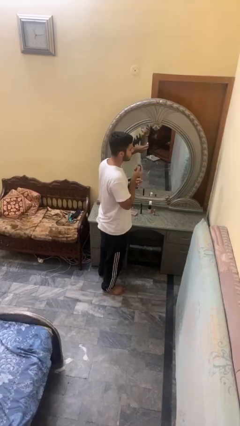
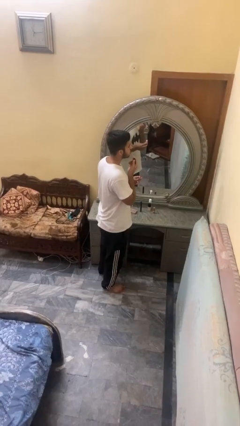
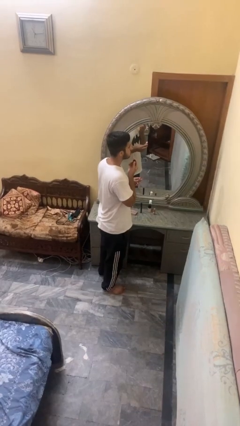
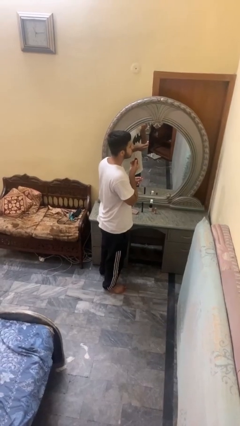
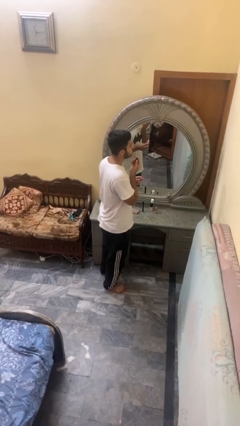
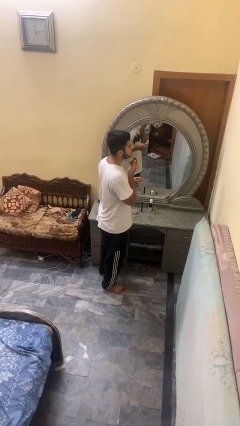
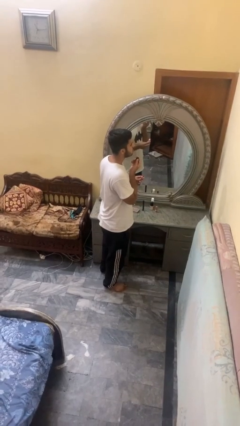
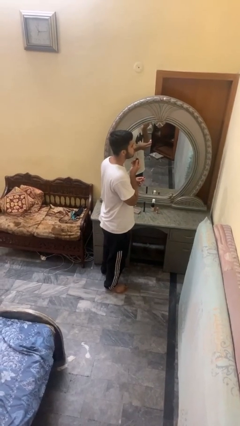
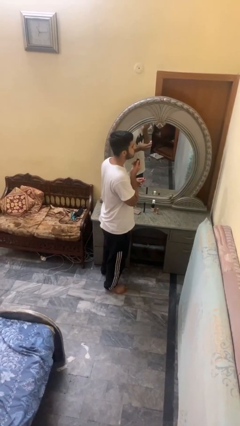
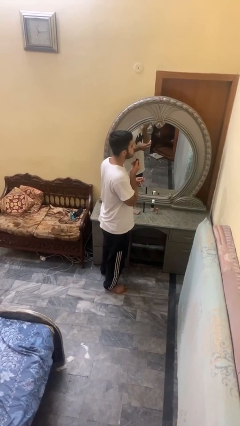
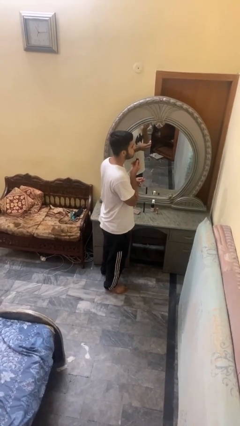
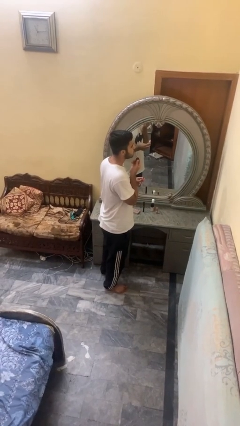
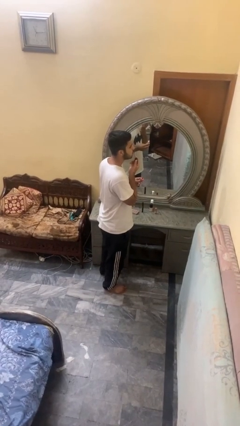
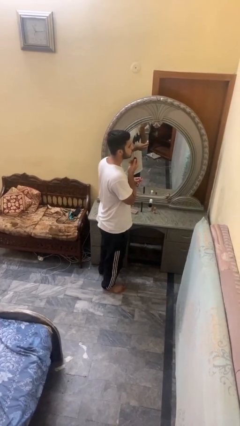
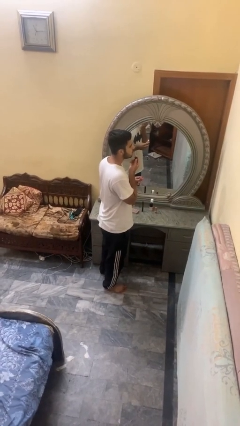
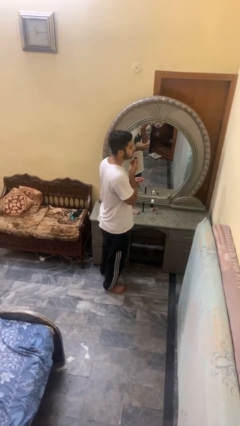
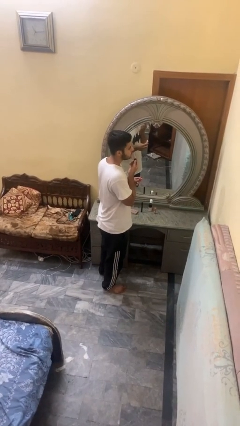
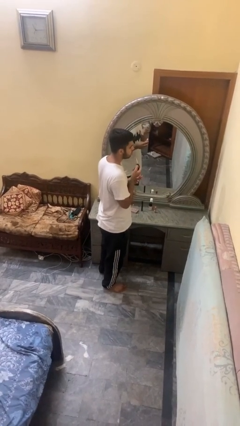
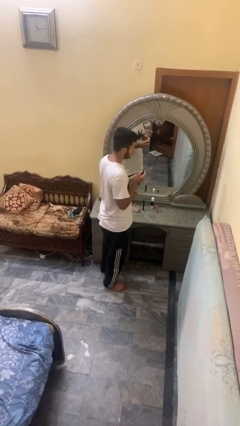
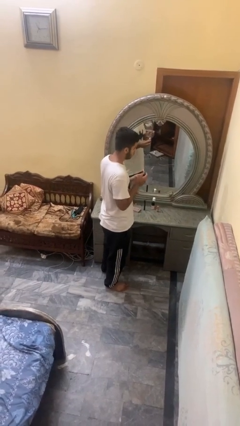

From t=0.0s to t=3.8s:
person applies lip makeup

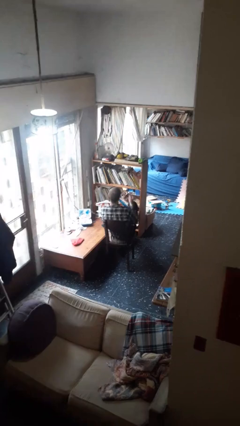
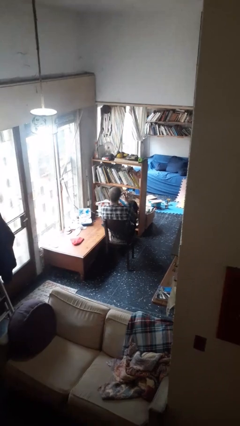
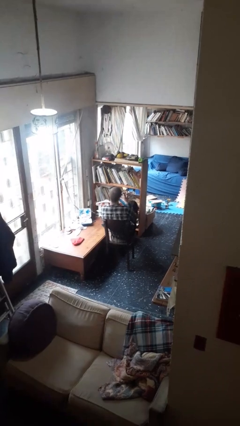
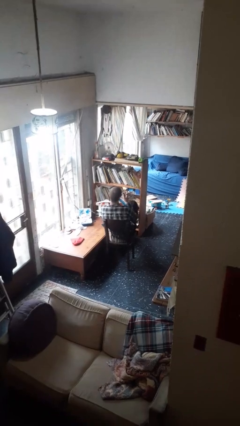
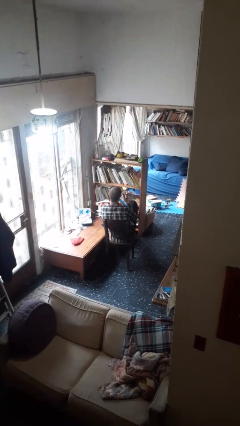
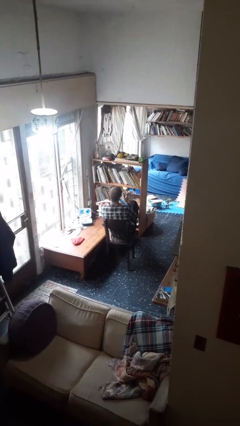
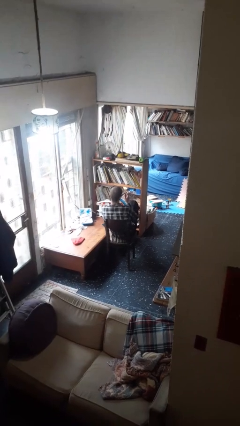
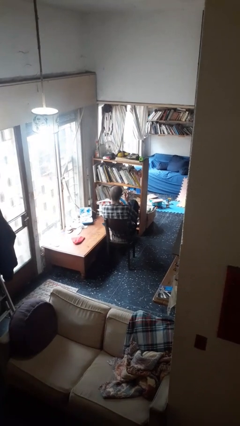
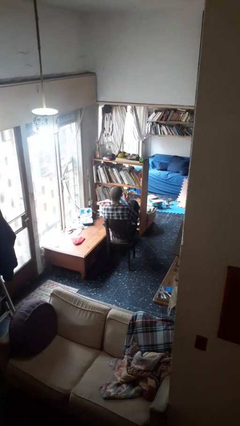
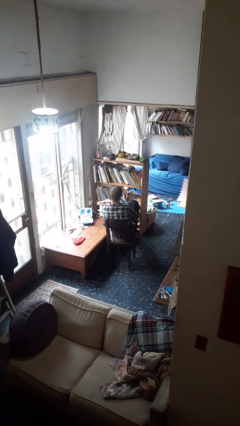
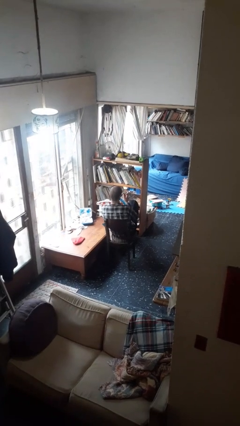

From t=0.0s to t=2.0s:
person files fingernails

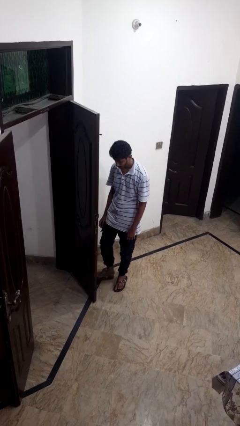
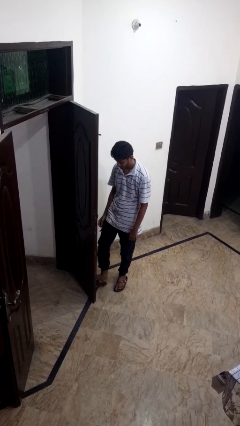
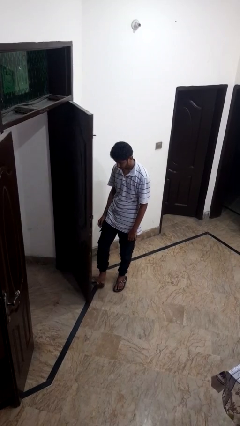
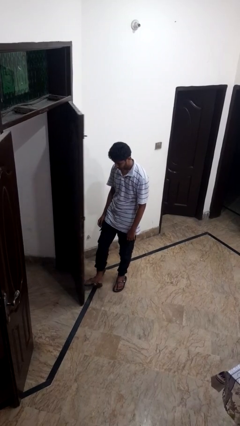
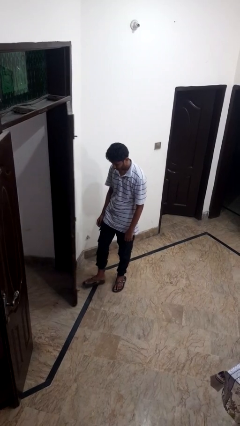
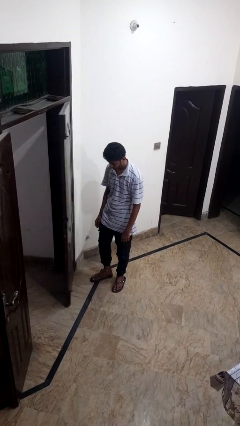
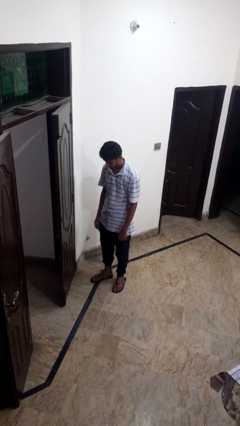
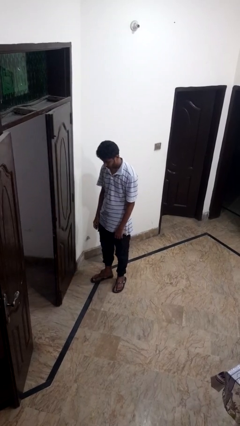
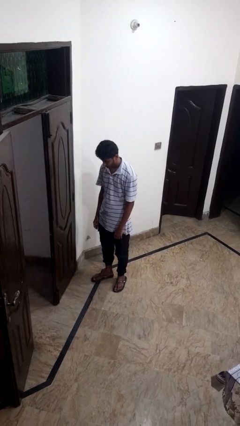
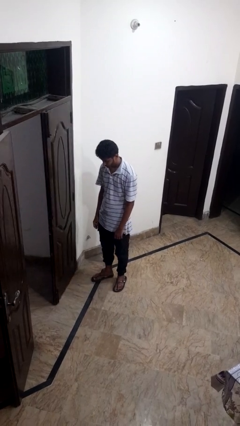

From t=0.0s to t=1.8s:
person closes door with foot

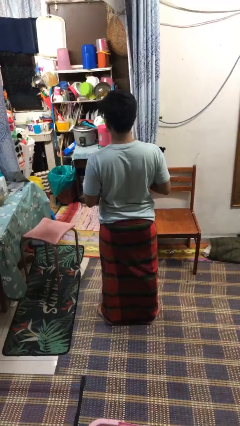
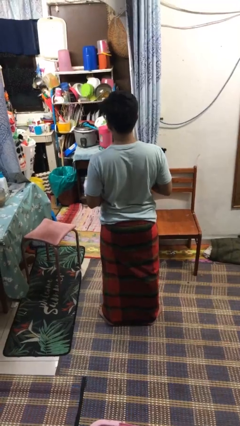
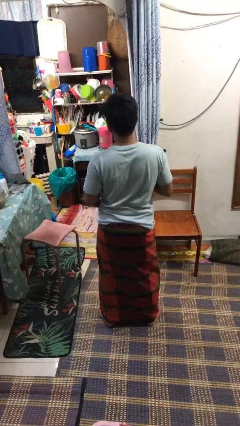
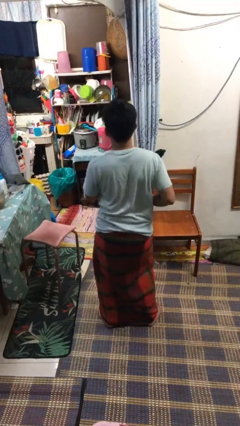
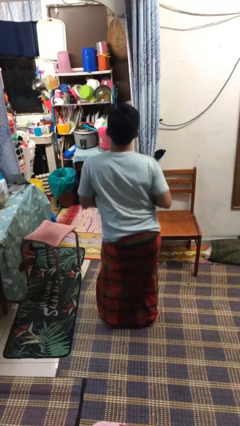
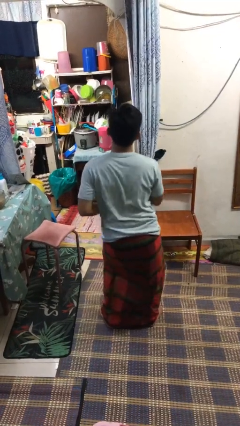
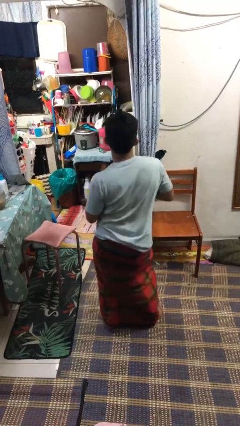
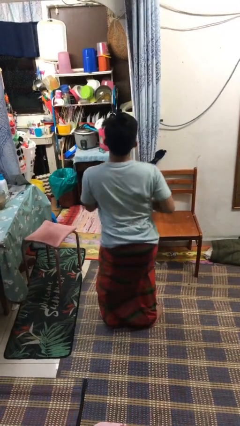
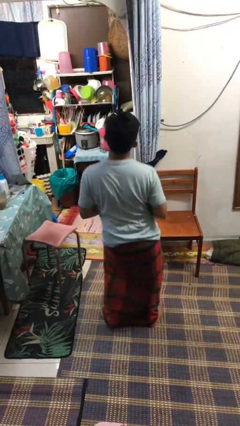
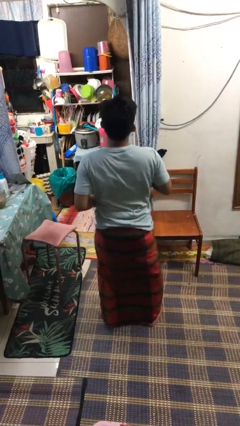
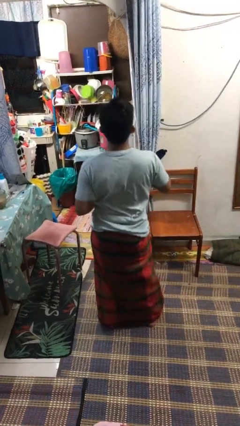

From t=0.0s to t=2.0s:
person wiggles hips

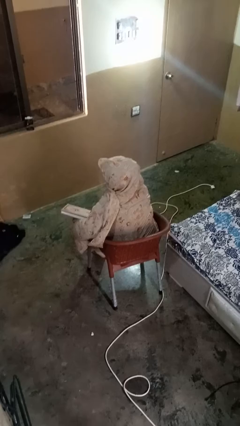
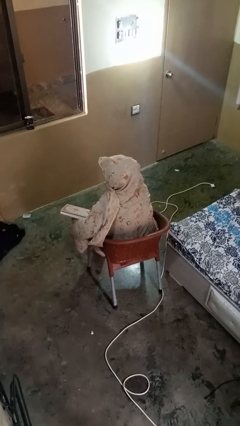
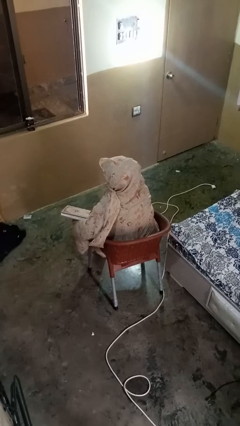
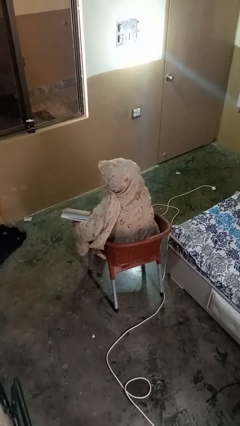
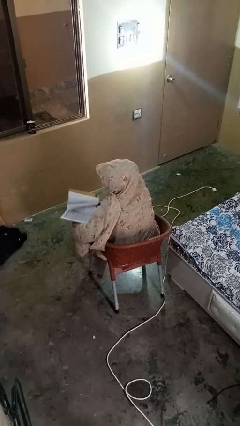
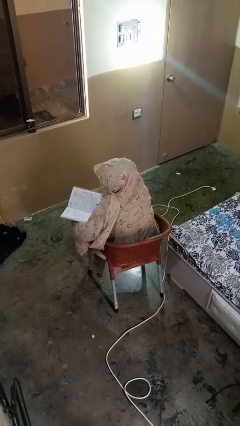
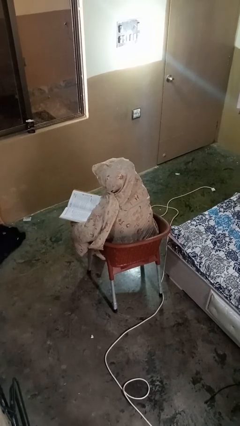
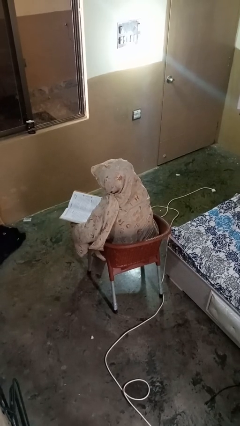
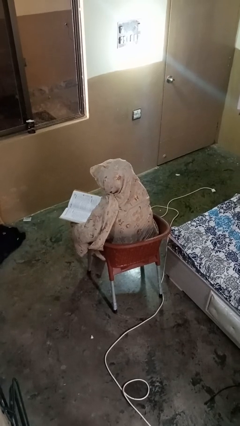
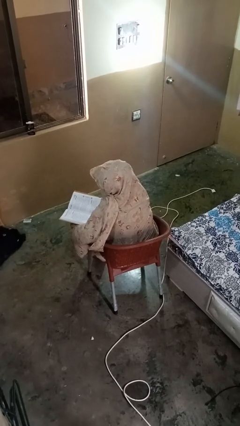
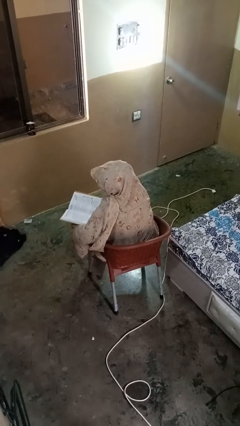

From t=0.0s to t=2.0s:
person reads book

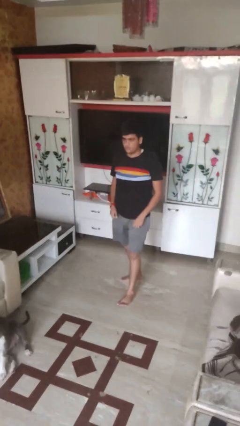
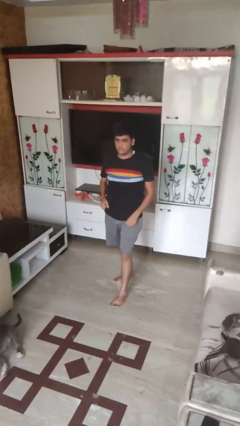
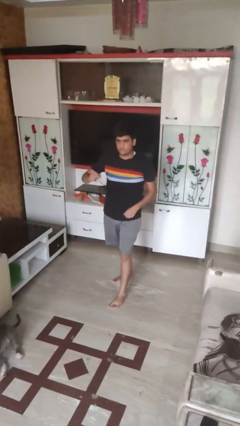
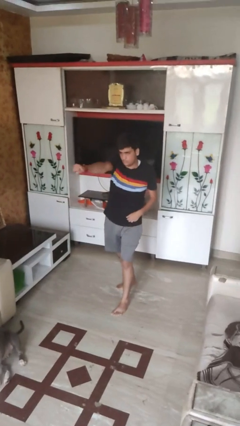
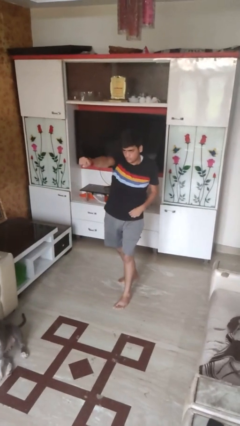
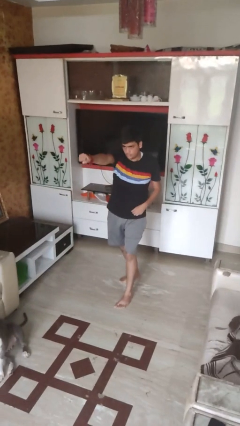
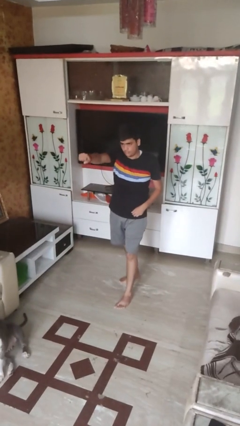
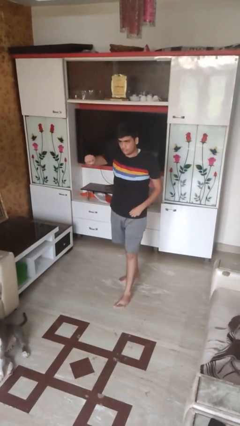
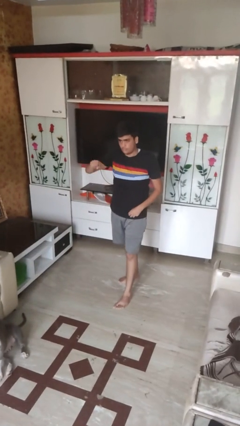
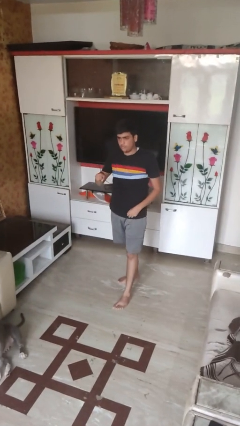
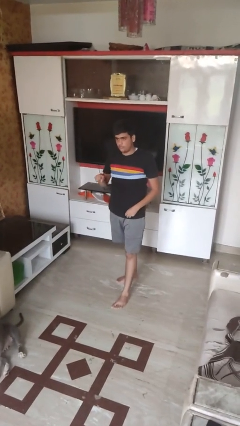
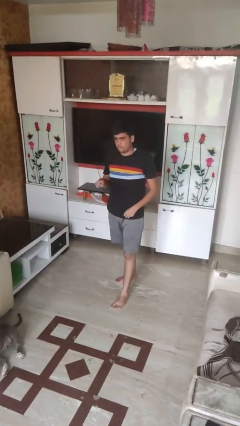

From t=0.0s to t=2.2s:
person punches

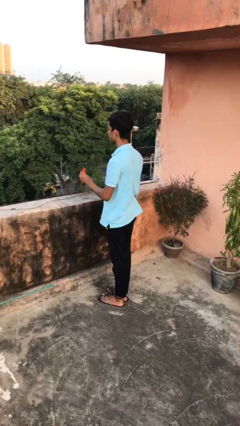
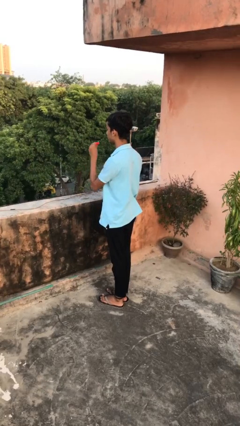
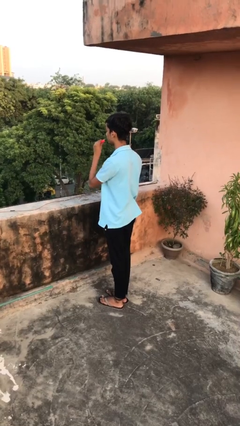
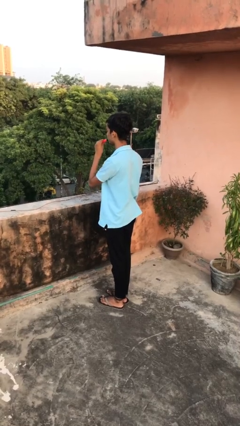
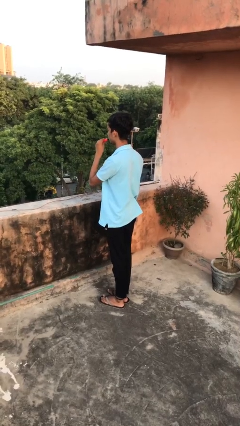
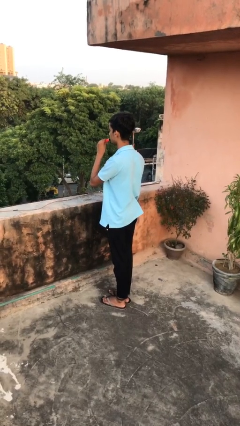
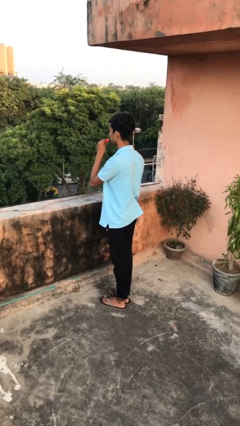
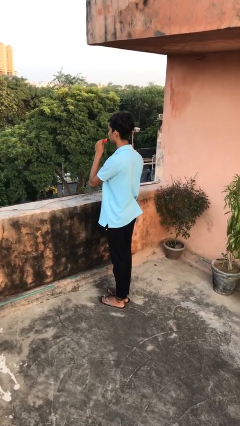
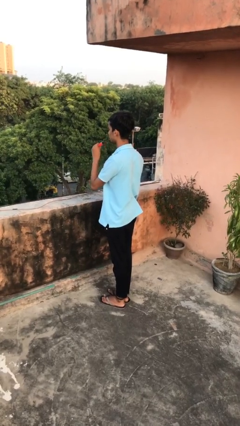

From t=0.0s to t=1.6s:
person vapes

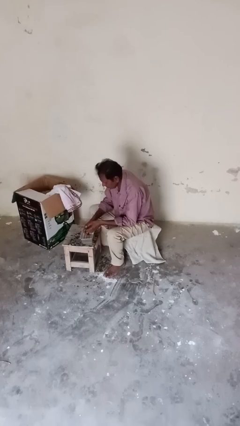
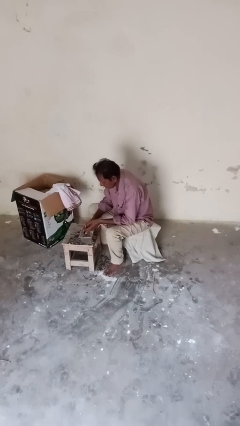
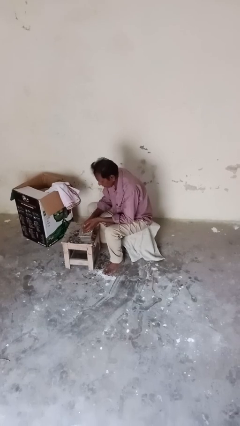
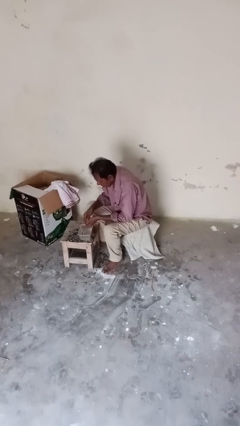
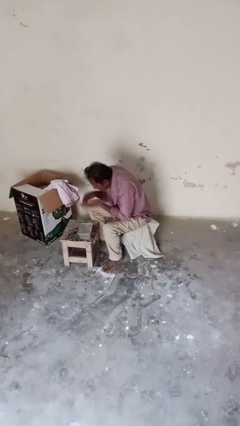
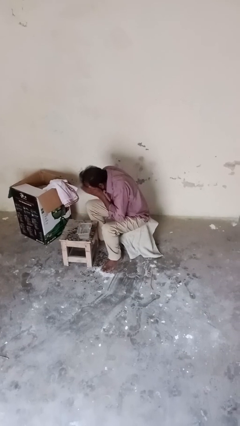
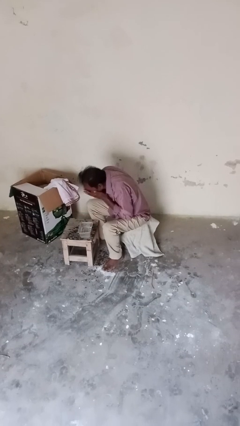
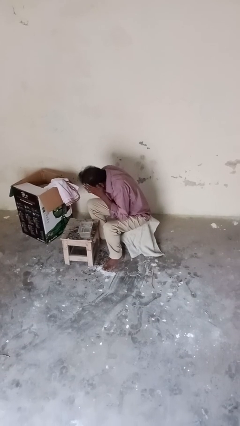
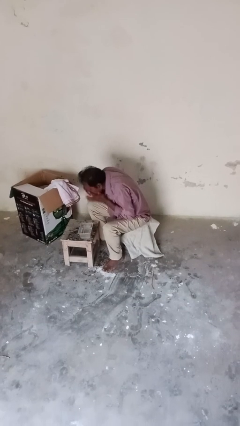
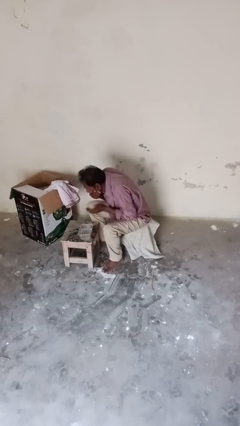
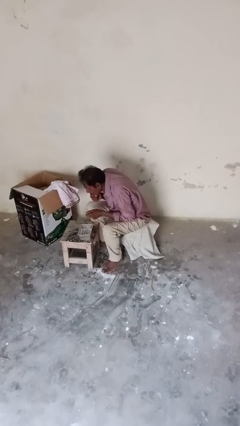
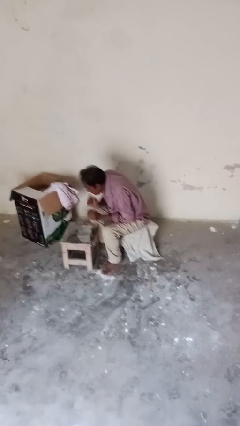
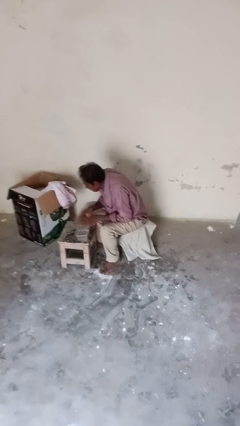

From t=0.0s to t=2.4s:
person washes face
